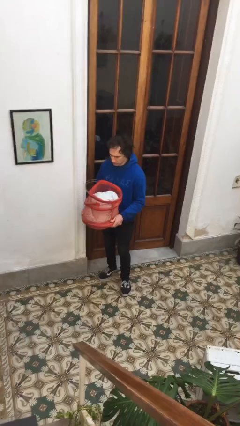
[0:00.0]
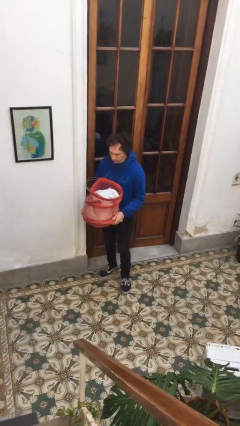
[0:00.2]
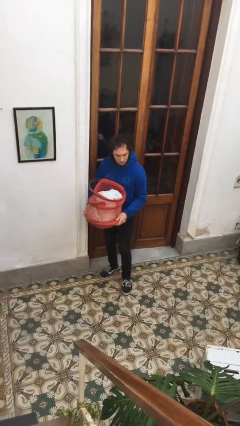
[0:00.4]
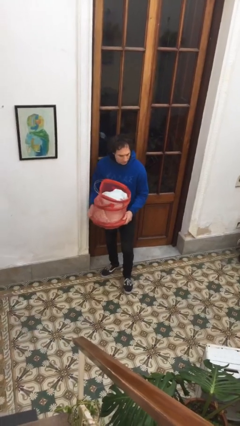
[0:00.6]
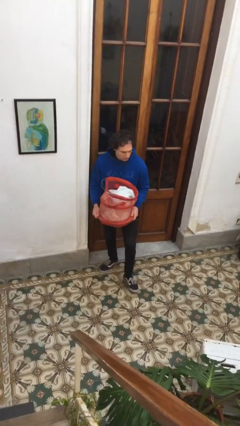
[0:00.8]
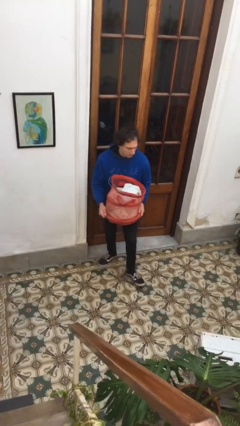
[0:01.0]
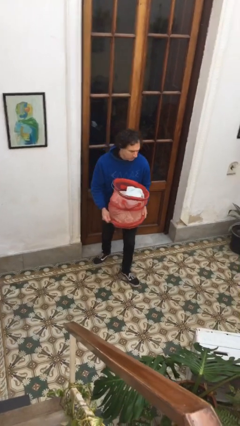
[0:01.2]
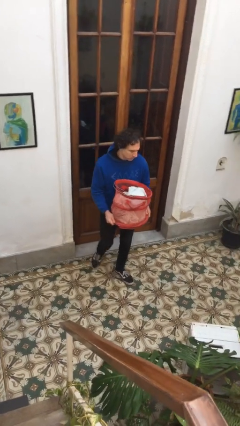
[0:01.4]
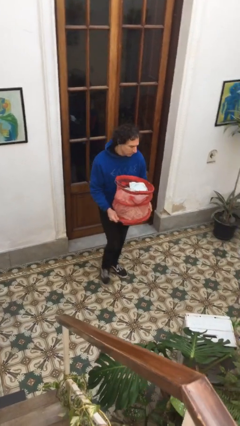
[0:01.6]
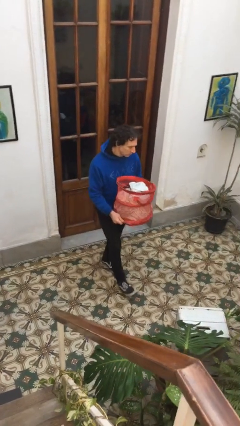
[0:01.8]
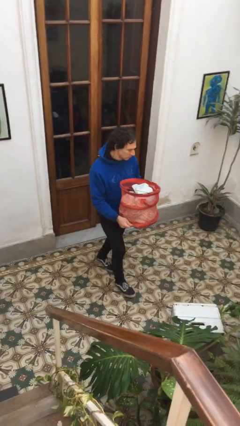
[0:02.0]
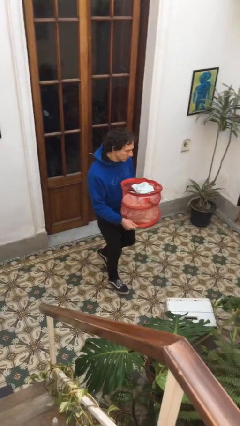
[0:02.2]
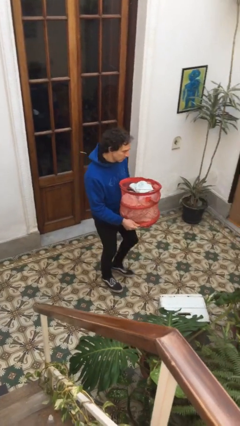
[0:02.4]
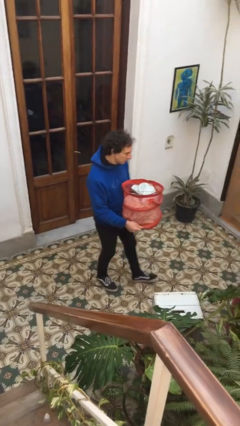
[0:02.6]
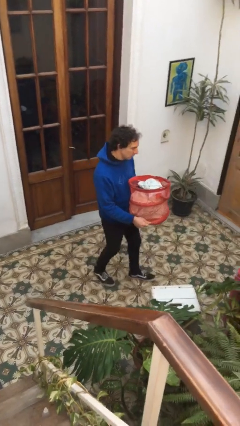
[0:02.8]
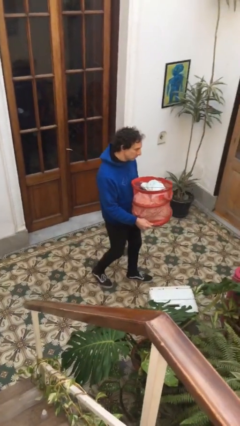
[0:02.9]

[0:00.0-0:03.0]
person carries laundry basket

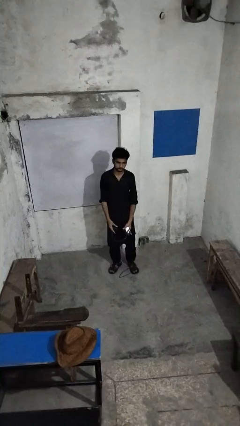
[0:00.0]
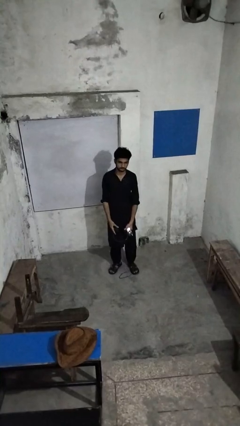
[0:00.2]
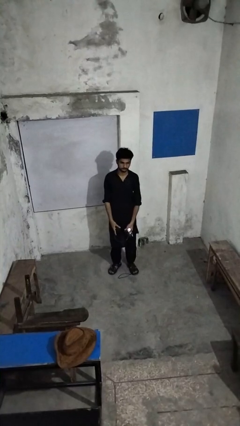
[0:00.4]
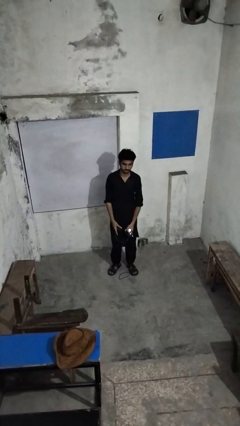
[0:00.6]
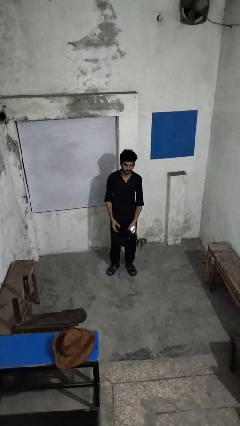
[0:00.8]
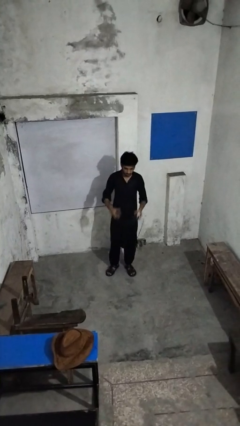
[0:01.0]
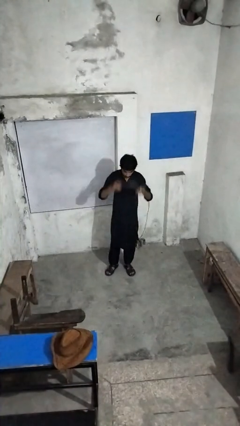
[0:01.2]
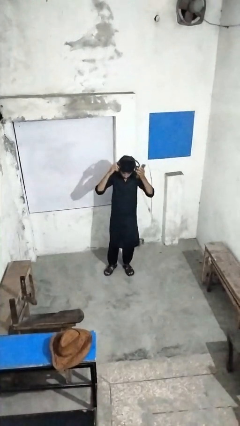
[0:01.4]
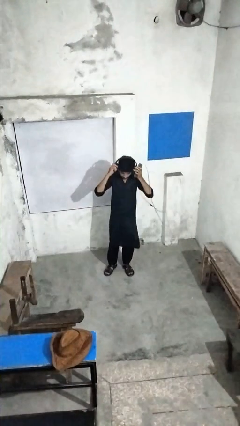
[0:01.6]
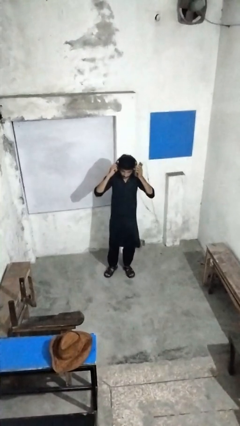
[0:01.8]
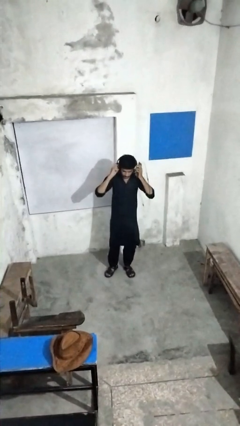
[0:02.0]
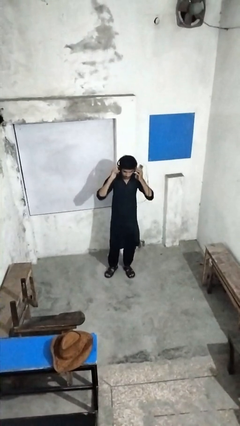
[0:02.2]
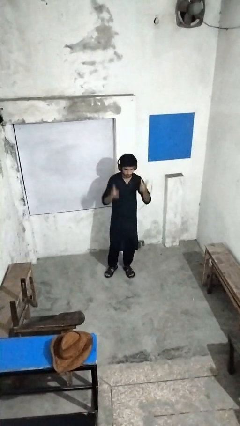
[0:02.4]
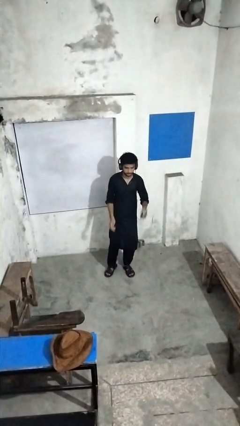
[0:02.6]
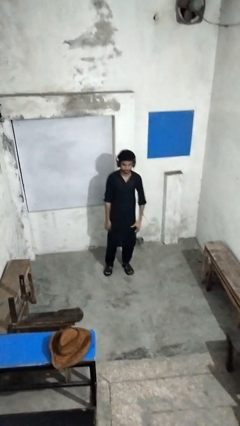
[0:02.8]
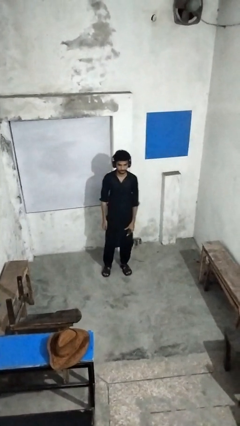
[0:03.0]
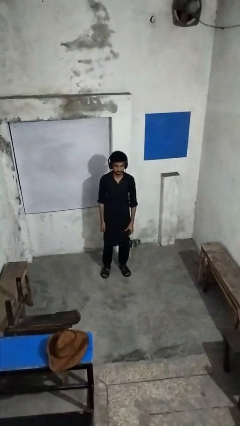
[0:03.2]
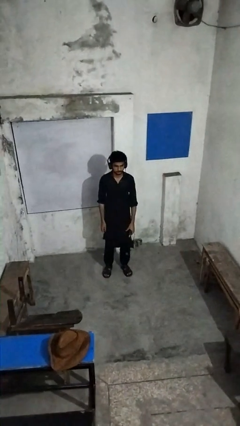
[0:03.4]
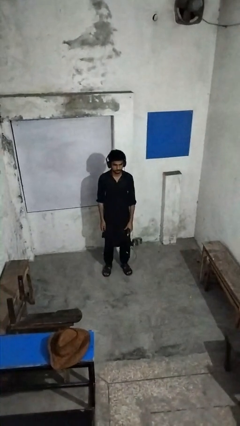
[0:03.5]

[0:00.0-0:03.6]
person puts on headphones

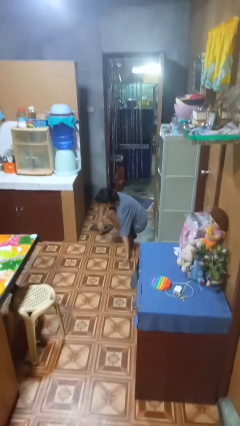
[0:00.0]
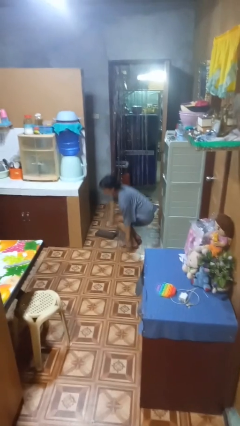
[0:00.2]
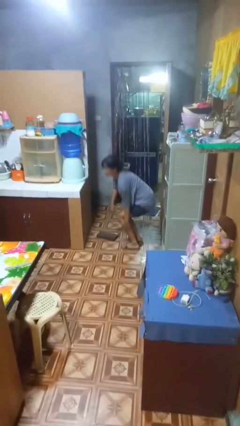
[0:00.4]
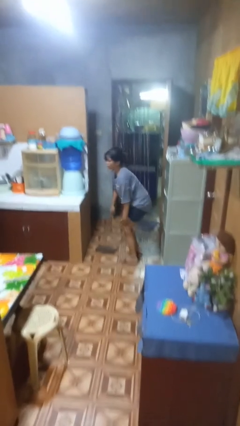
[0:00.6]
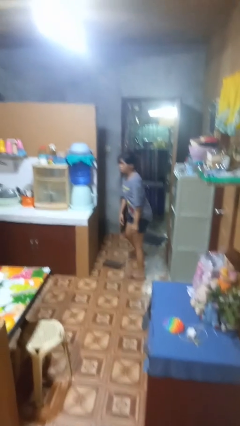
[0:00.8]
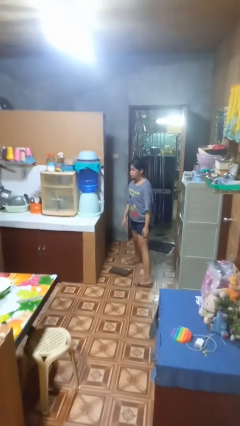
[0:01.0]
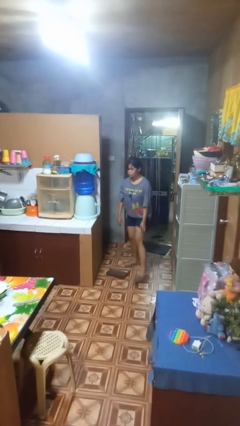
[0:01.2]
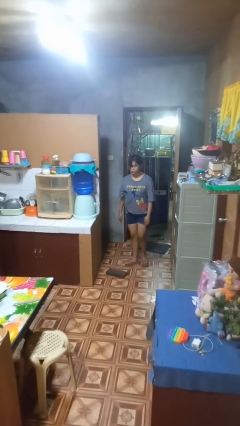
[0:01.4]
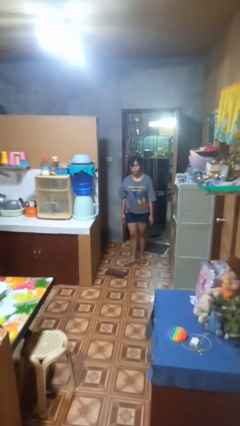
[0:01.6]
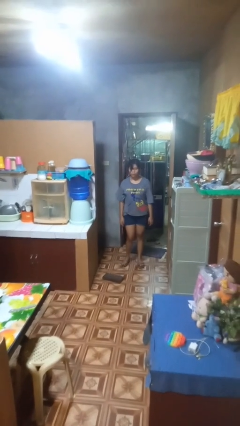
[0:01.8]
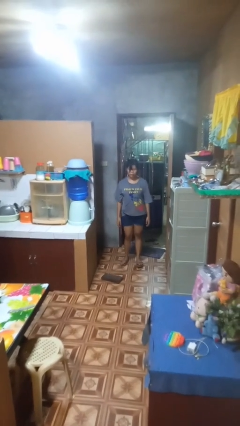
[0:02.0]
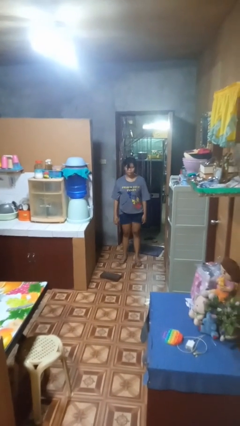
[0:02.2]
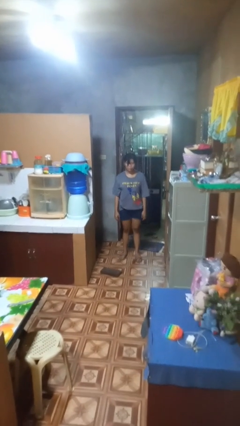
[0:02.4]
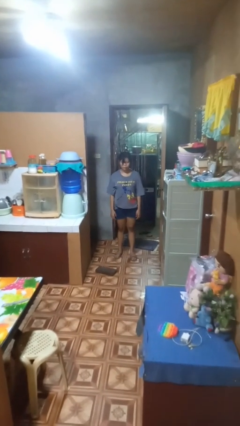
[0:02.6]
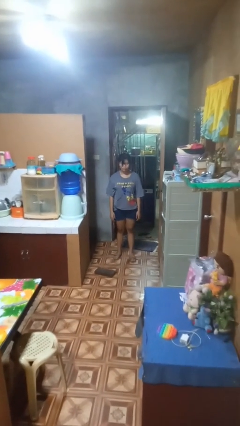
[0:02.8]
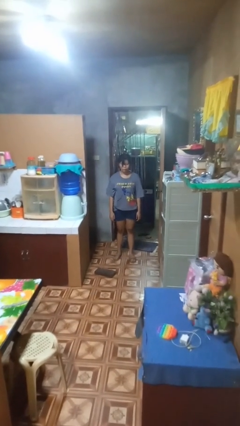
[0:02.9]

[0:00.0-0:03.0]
person stands up from floor

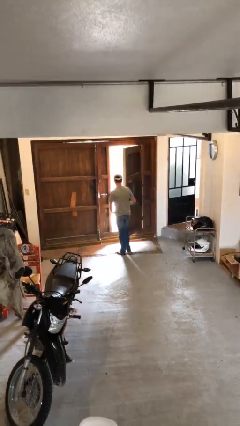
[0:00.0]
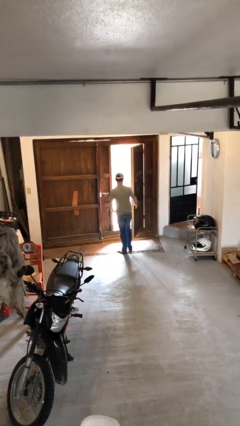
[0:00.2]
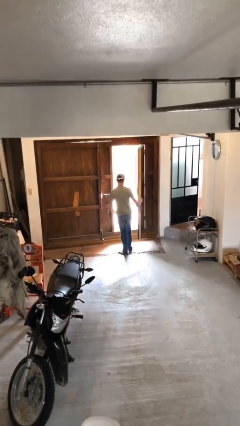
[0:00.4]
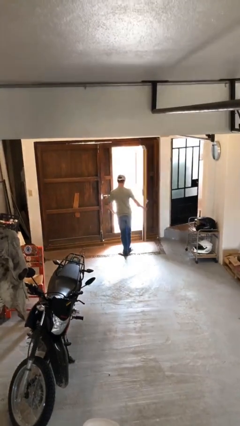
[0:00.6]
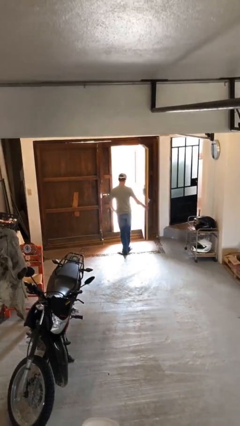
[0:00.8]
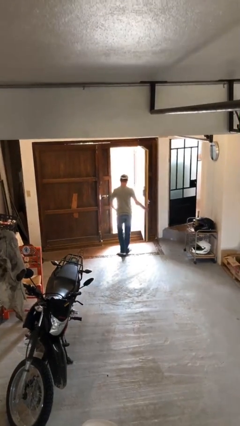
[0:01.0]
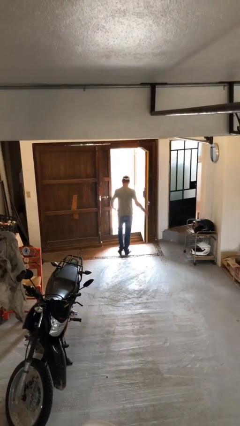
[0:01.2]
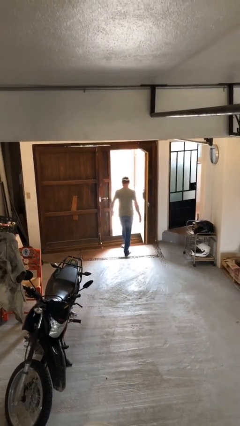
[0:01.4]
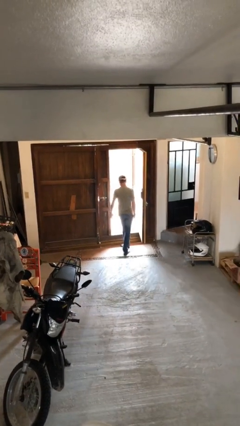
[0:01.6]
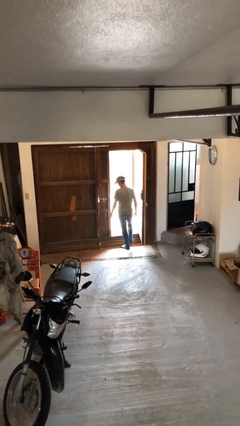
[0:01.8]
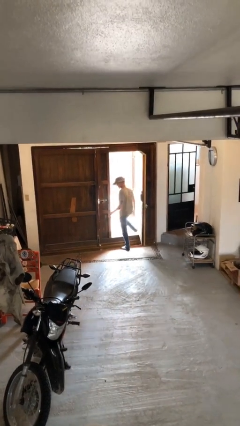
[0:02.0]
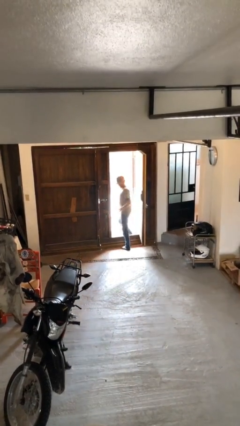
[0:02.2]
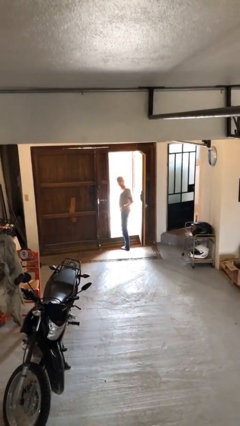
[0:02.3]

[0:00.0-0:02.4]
person exits scene through structure

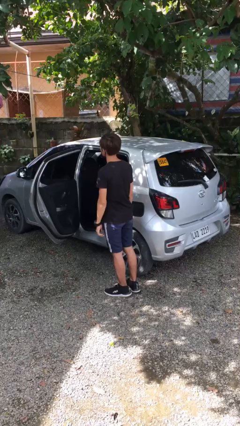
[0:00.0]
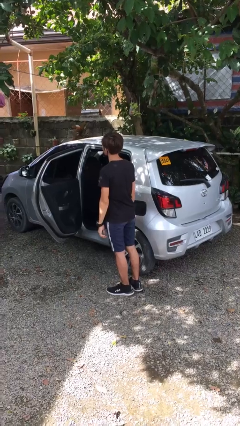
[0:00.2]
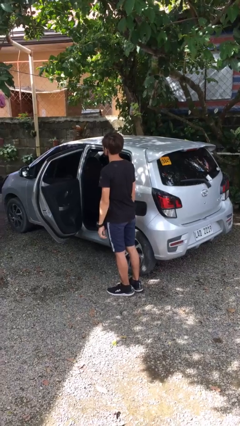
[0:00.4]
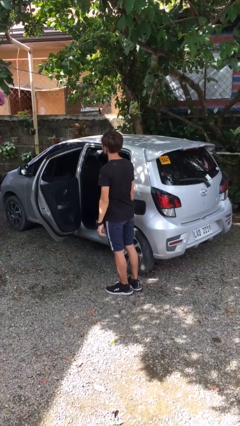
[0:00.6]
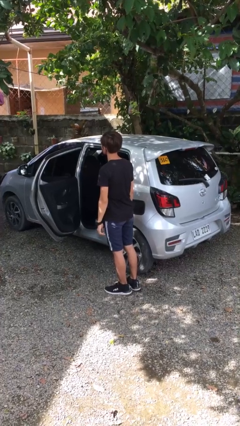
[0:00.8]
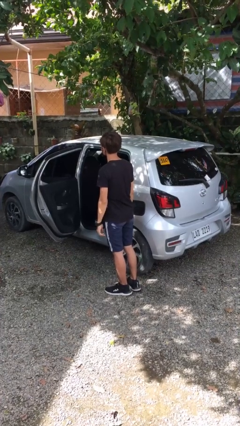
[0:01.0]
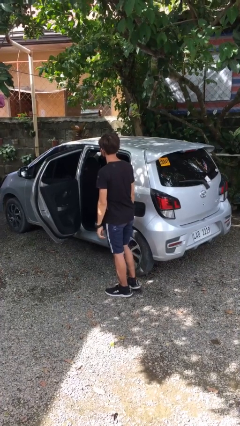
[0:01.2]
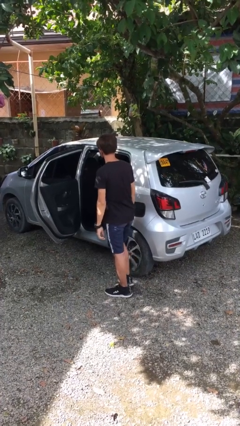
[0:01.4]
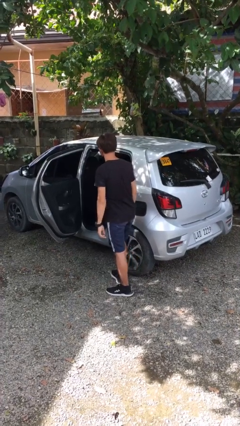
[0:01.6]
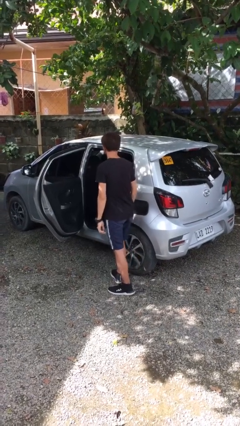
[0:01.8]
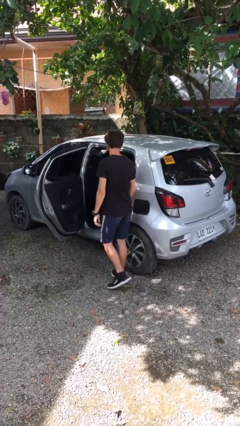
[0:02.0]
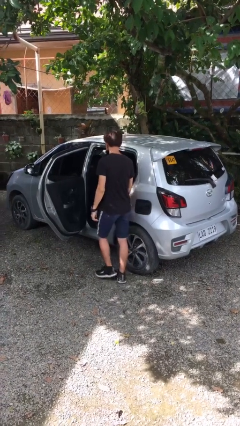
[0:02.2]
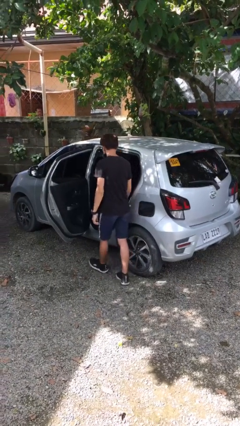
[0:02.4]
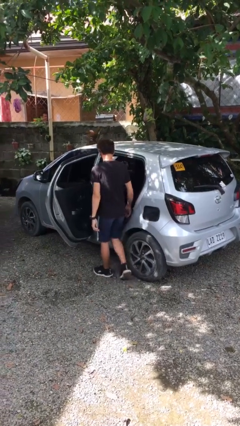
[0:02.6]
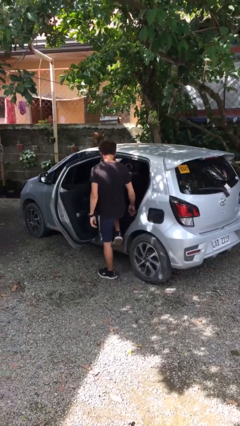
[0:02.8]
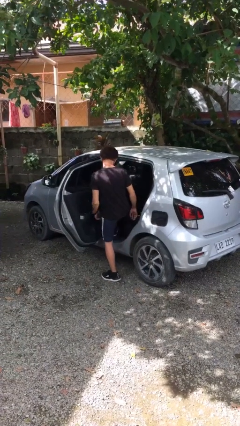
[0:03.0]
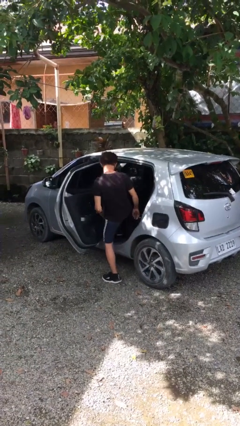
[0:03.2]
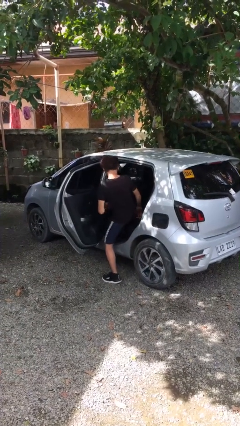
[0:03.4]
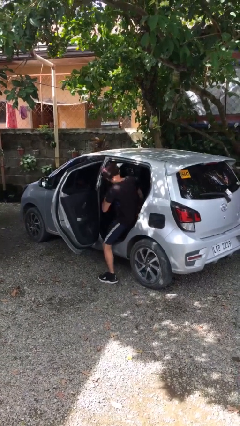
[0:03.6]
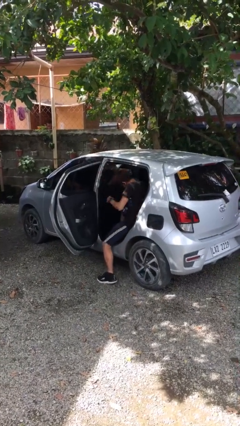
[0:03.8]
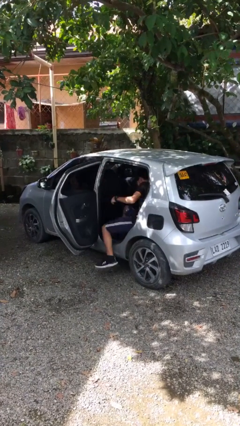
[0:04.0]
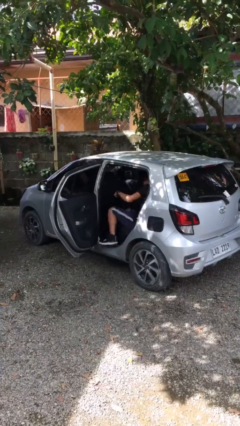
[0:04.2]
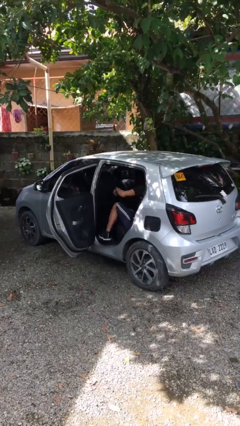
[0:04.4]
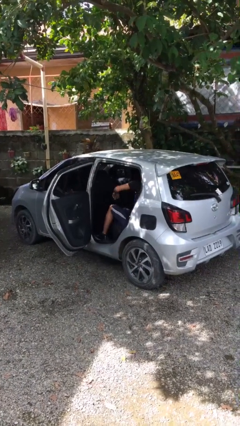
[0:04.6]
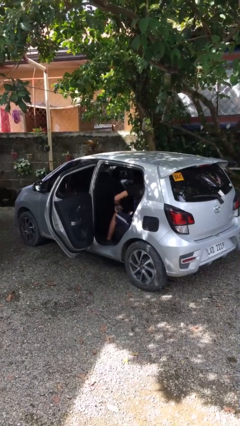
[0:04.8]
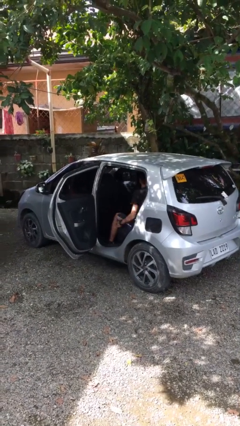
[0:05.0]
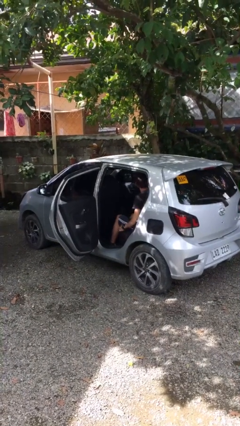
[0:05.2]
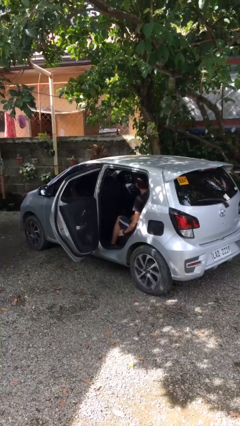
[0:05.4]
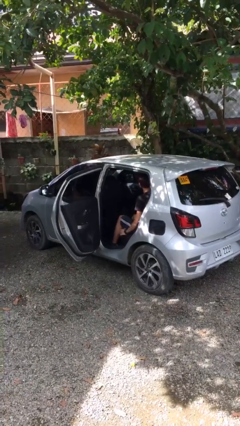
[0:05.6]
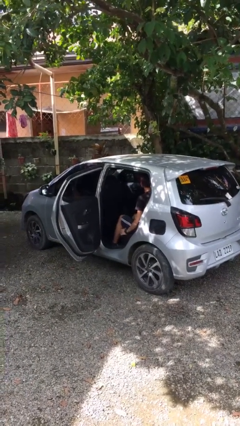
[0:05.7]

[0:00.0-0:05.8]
person enters car
